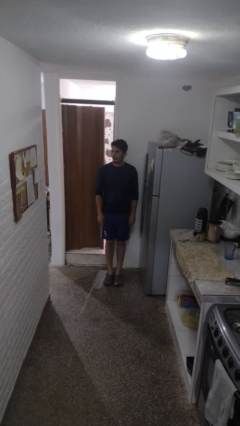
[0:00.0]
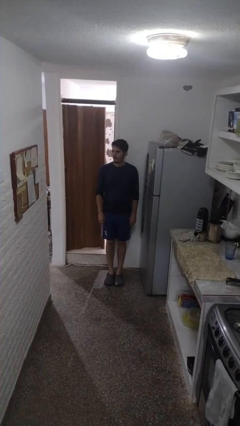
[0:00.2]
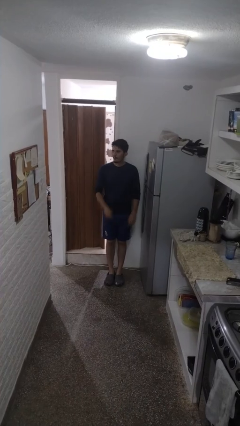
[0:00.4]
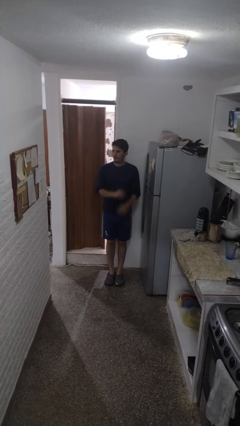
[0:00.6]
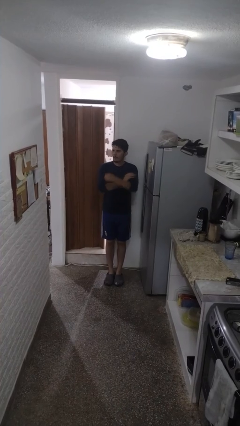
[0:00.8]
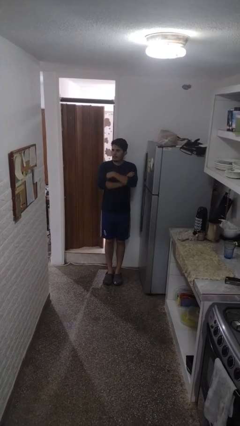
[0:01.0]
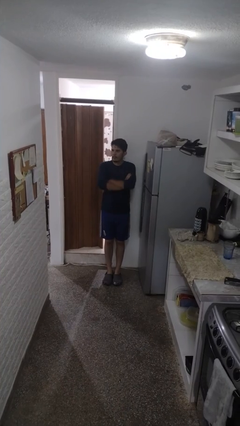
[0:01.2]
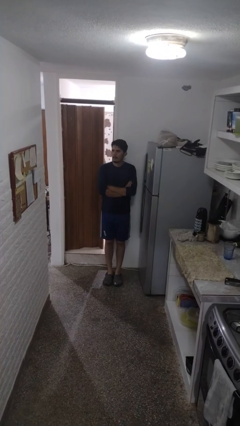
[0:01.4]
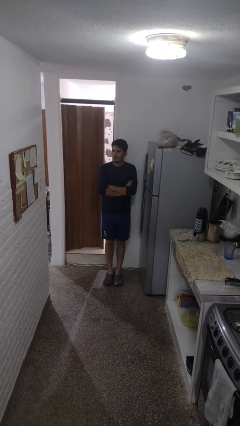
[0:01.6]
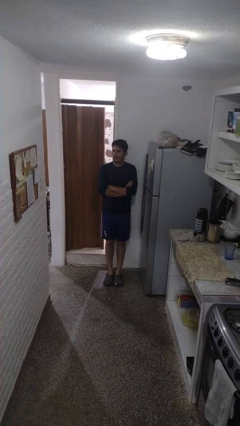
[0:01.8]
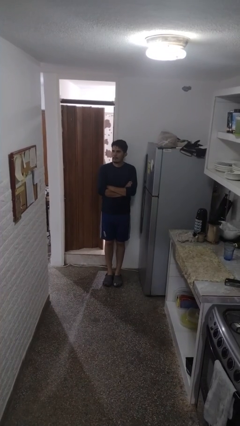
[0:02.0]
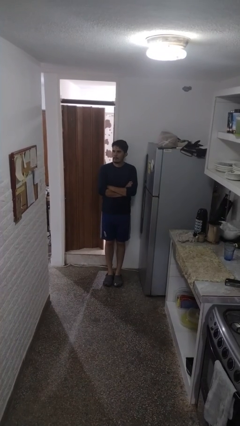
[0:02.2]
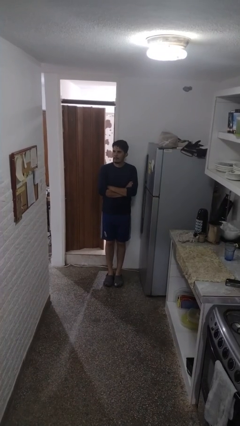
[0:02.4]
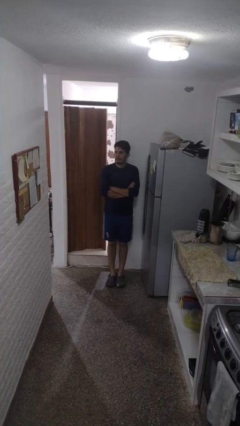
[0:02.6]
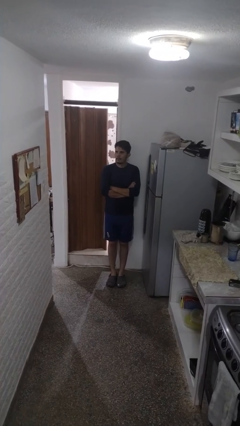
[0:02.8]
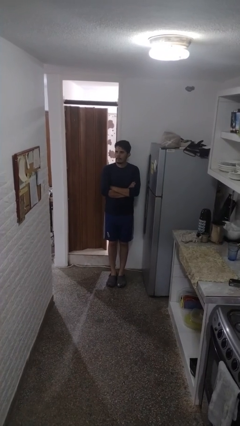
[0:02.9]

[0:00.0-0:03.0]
person crosses arms

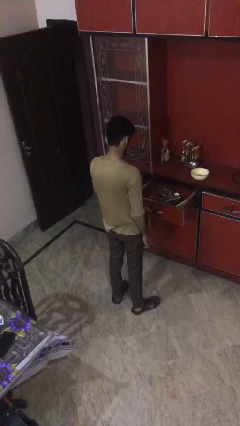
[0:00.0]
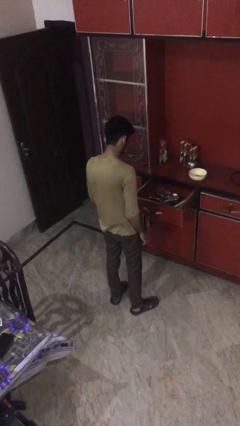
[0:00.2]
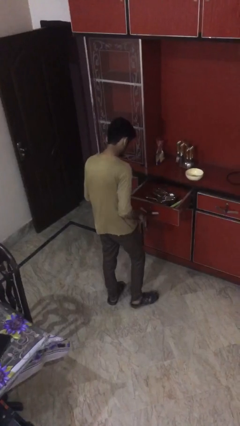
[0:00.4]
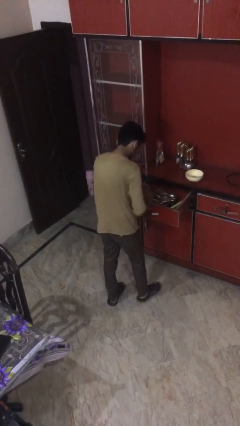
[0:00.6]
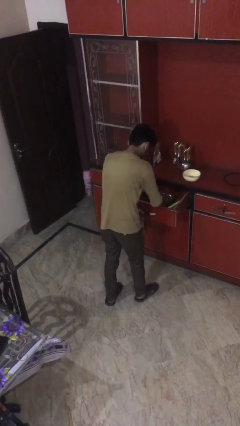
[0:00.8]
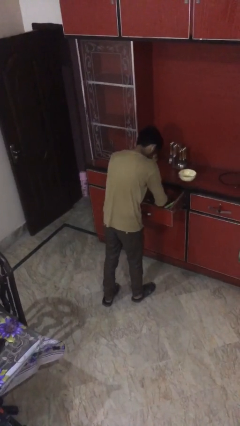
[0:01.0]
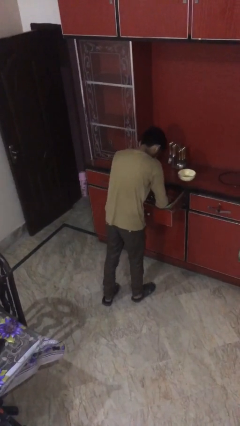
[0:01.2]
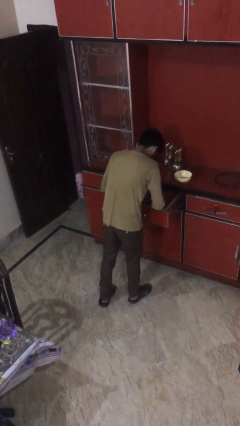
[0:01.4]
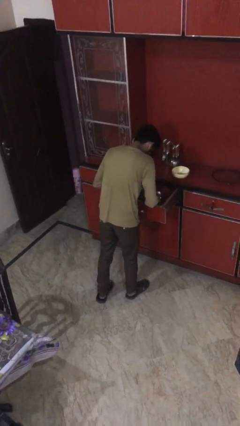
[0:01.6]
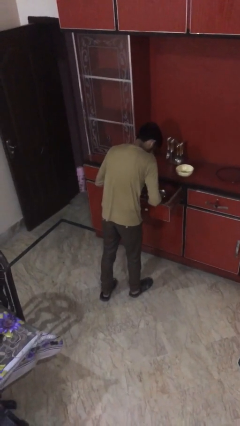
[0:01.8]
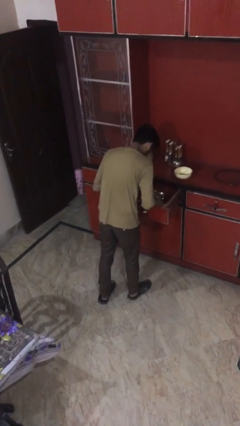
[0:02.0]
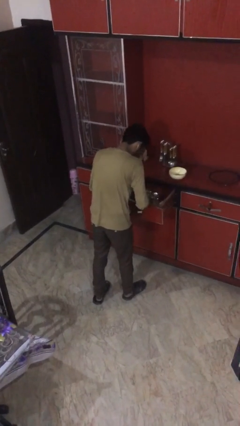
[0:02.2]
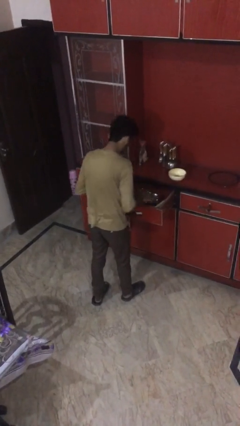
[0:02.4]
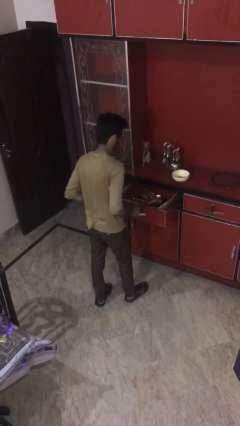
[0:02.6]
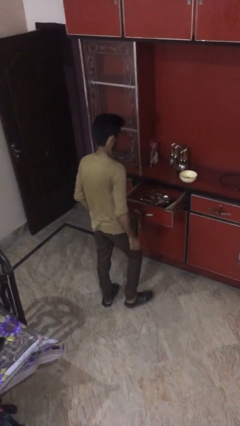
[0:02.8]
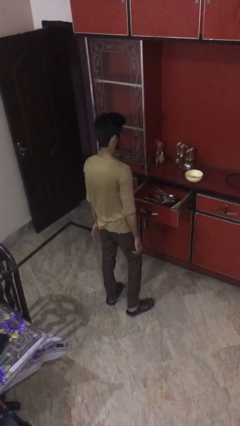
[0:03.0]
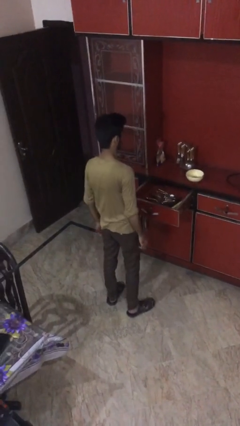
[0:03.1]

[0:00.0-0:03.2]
person searches in kitchen drawer

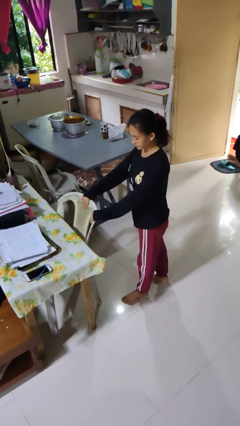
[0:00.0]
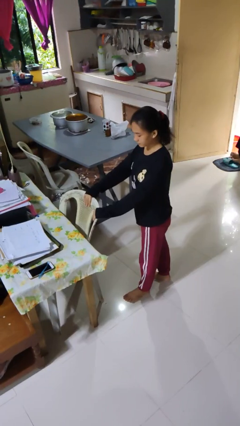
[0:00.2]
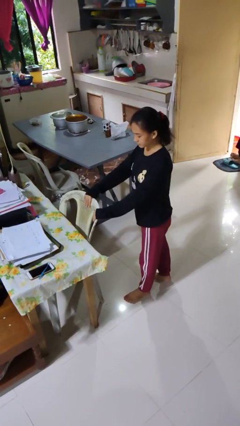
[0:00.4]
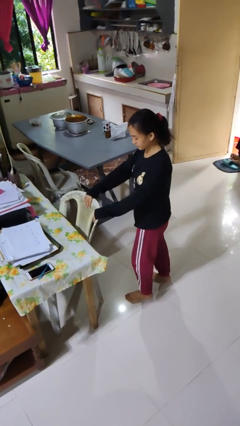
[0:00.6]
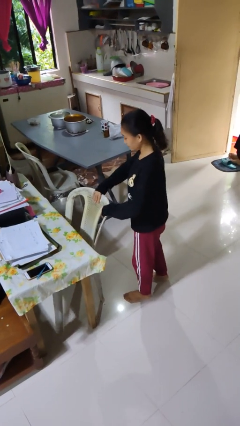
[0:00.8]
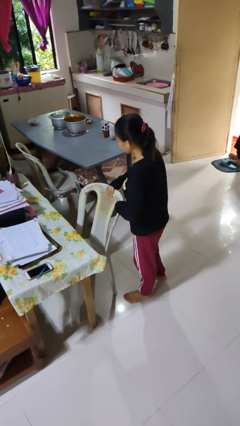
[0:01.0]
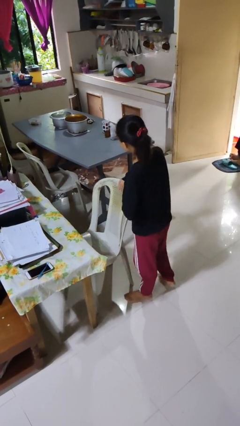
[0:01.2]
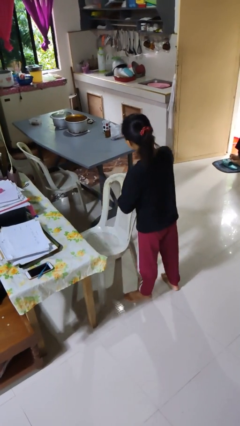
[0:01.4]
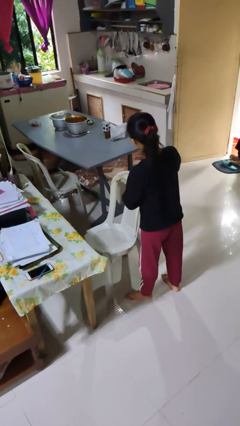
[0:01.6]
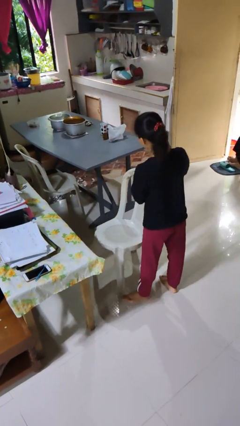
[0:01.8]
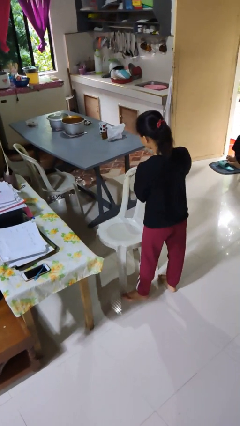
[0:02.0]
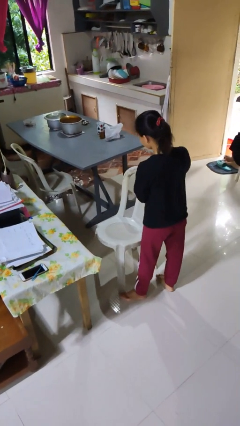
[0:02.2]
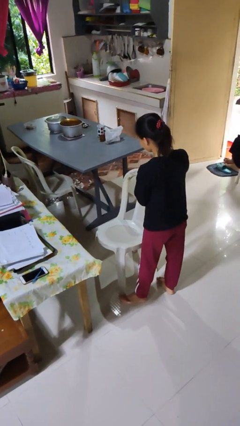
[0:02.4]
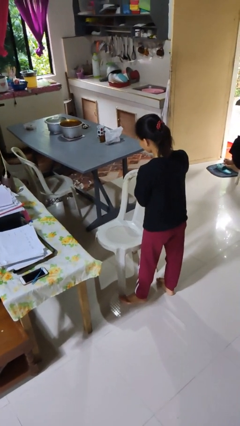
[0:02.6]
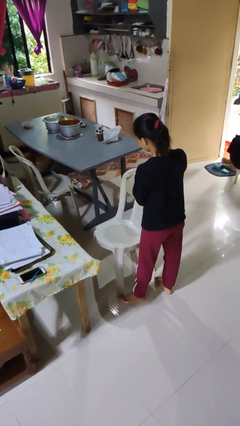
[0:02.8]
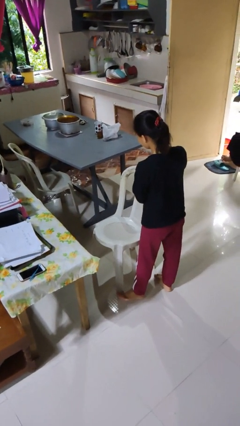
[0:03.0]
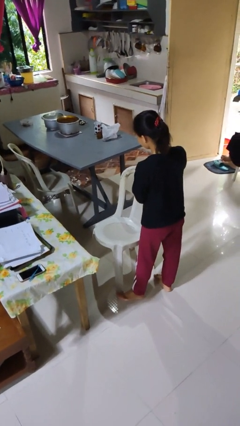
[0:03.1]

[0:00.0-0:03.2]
person pulls out chair

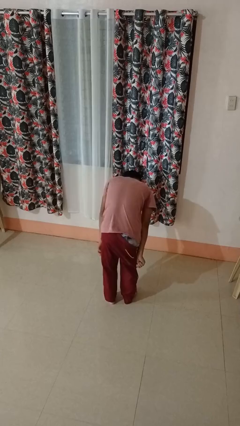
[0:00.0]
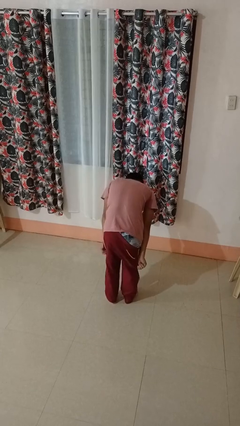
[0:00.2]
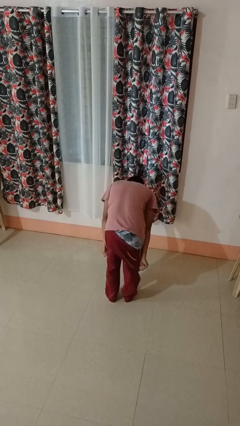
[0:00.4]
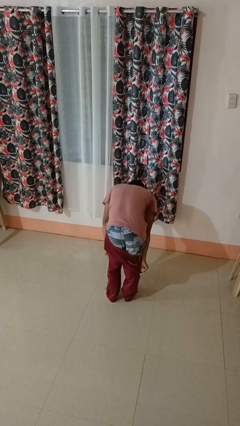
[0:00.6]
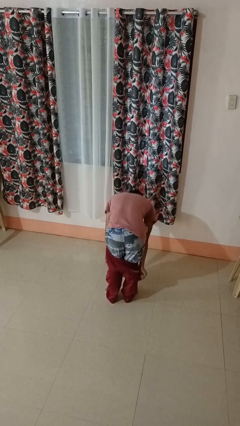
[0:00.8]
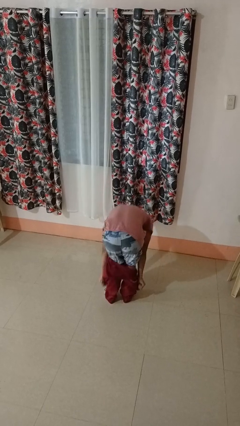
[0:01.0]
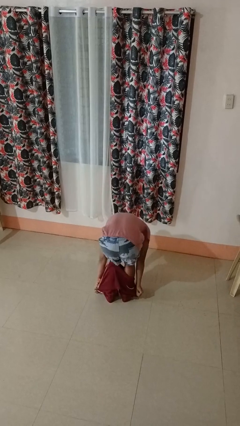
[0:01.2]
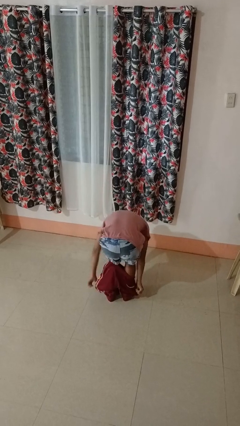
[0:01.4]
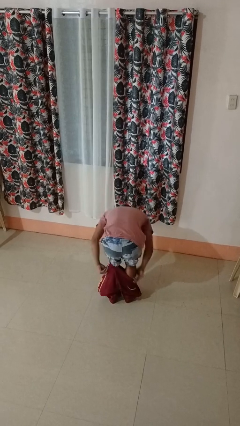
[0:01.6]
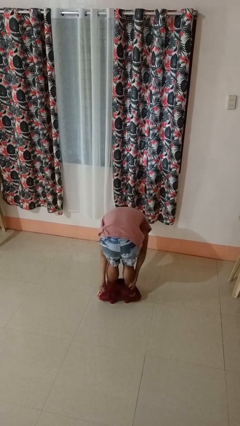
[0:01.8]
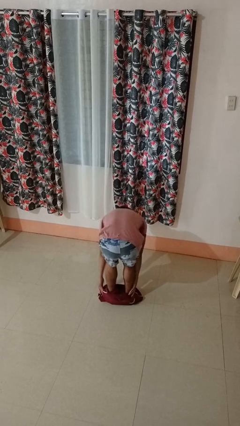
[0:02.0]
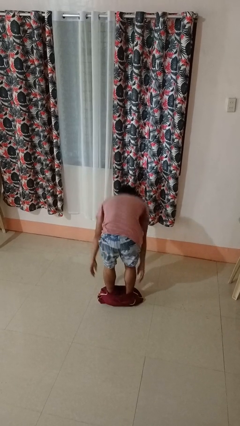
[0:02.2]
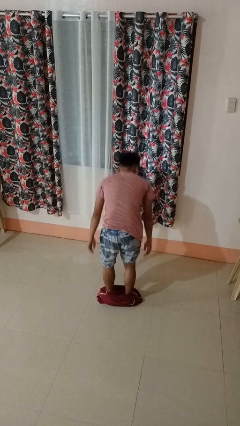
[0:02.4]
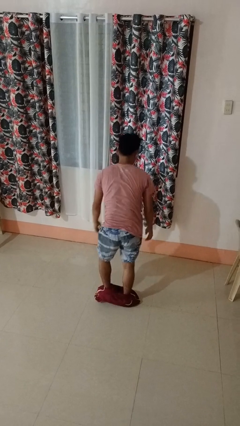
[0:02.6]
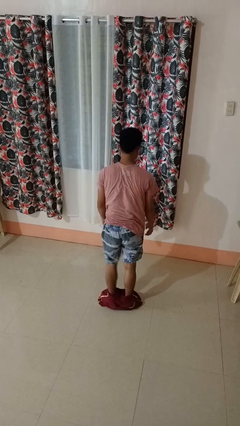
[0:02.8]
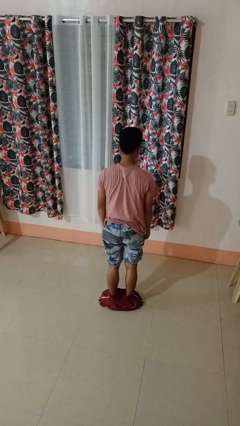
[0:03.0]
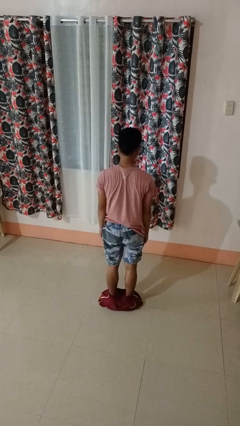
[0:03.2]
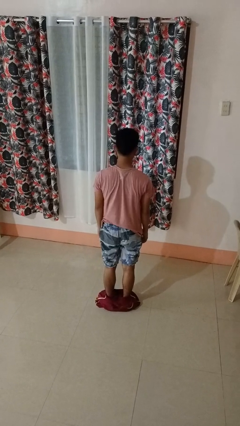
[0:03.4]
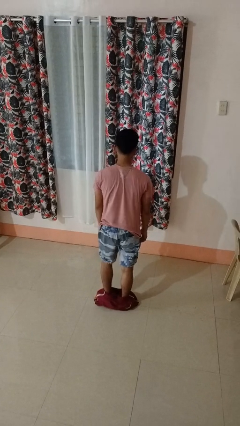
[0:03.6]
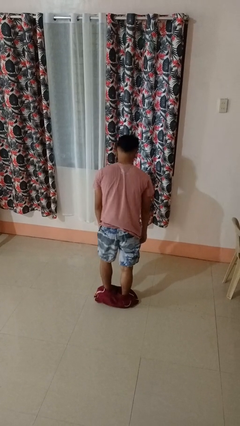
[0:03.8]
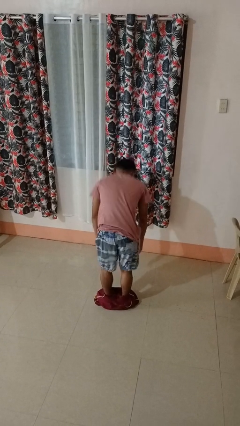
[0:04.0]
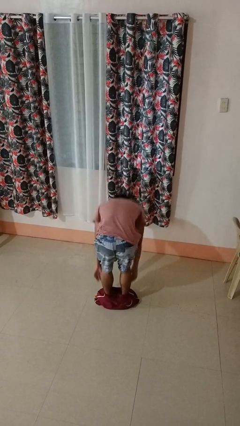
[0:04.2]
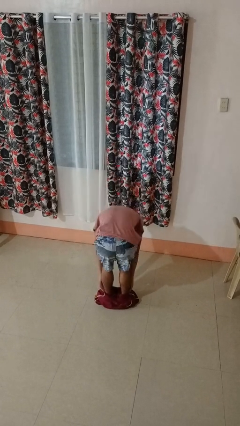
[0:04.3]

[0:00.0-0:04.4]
person takes off pants

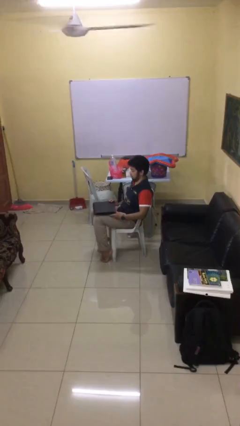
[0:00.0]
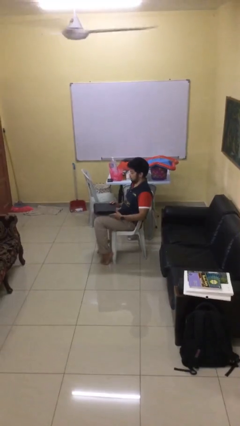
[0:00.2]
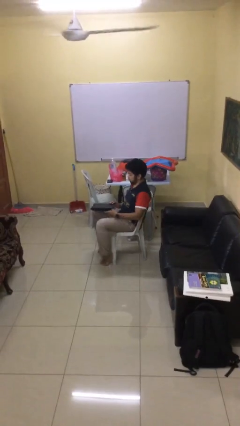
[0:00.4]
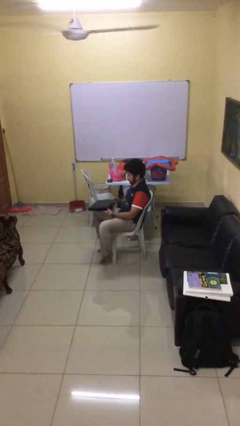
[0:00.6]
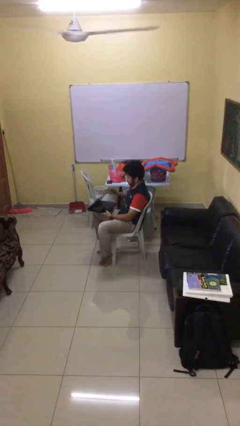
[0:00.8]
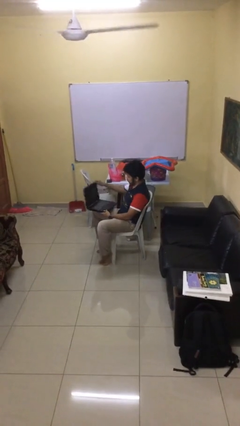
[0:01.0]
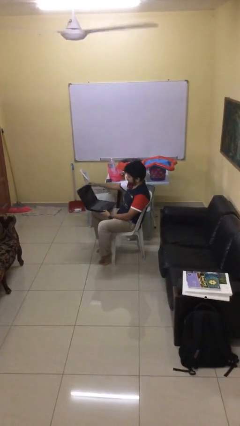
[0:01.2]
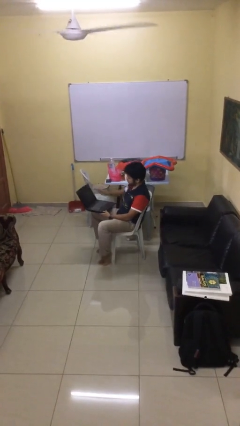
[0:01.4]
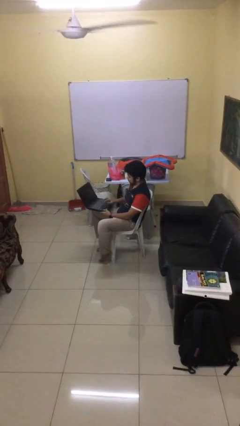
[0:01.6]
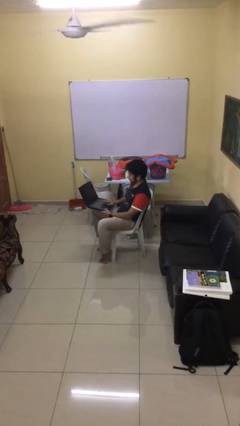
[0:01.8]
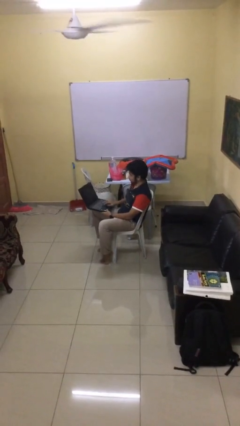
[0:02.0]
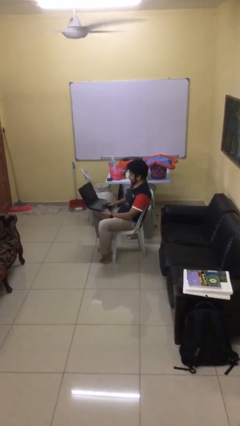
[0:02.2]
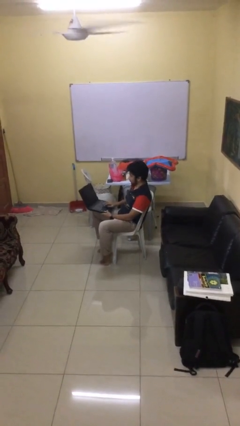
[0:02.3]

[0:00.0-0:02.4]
person opens laptop

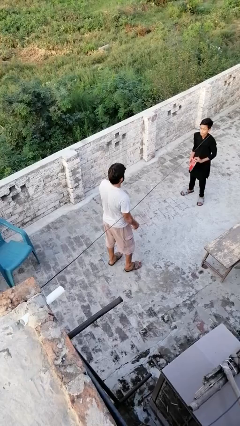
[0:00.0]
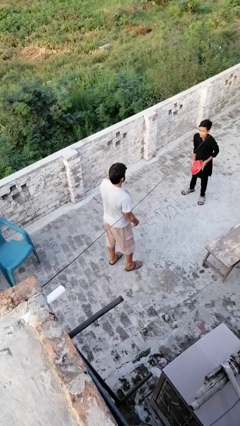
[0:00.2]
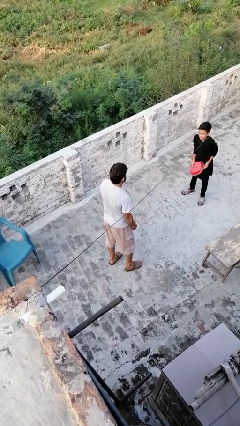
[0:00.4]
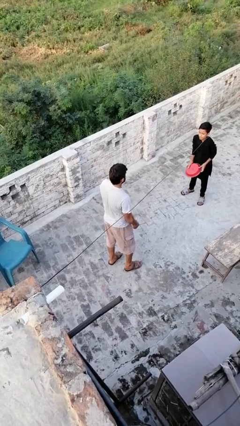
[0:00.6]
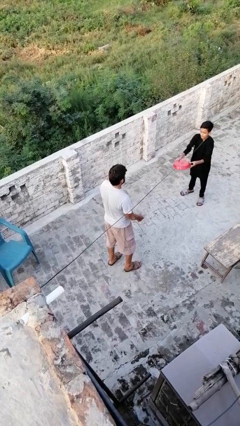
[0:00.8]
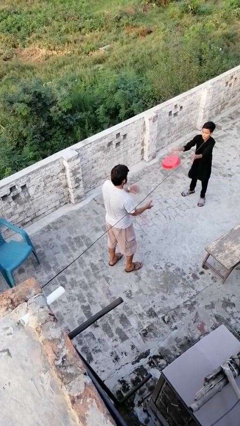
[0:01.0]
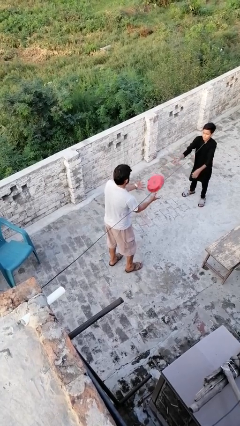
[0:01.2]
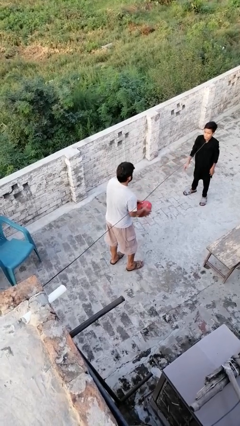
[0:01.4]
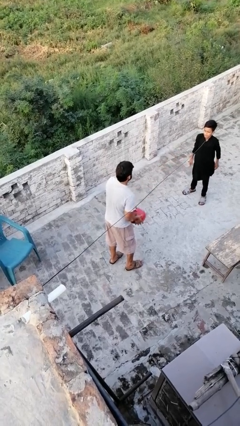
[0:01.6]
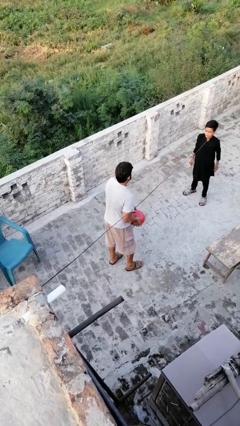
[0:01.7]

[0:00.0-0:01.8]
person catches object from person
